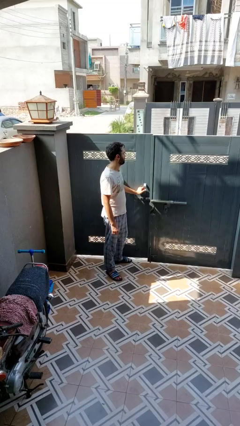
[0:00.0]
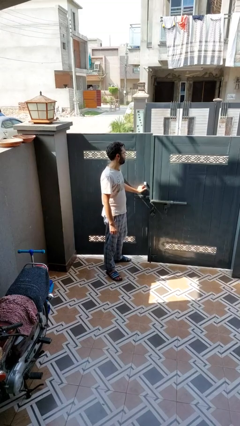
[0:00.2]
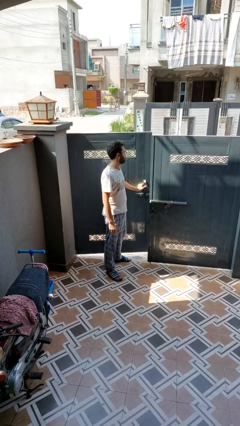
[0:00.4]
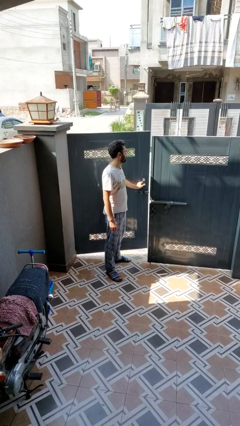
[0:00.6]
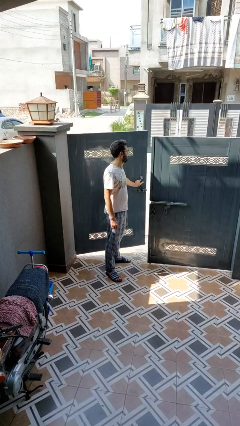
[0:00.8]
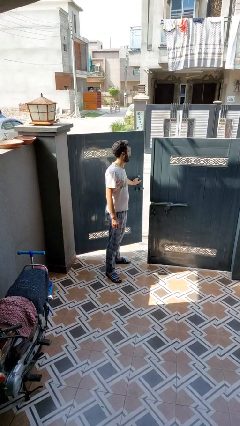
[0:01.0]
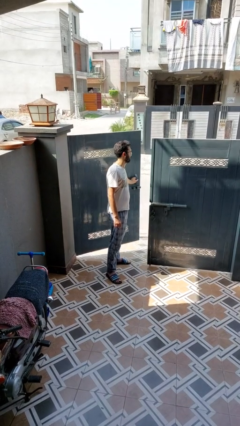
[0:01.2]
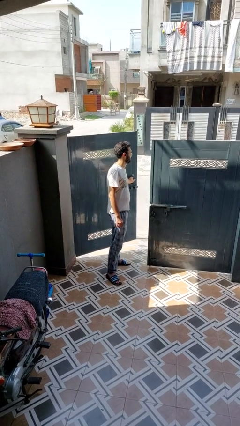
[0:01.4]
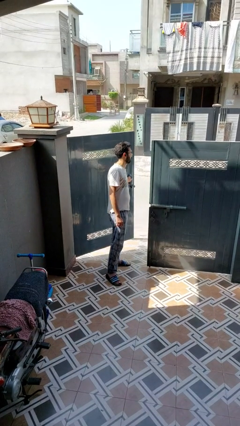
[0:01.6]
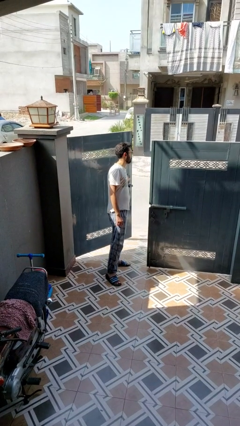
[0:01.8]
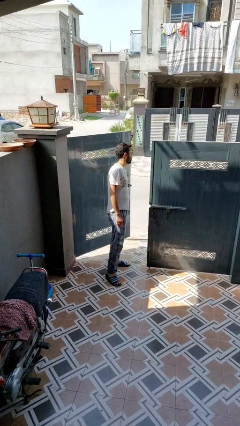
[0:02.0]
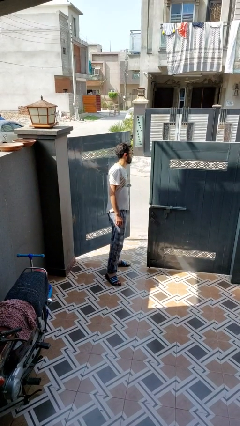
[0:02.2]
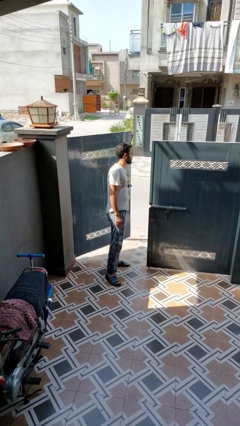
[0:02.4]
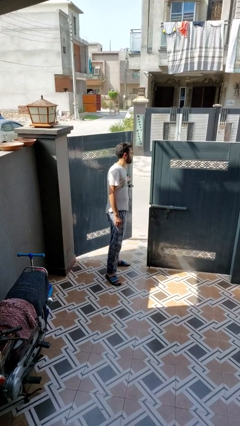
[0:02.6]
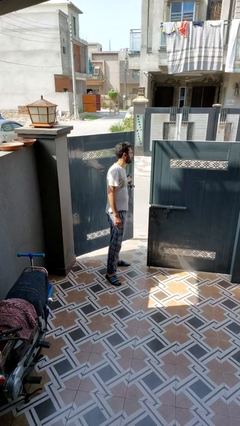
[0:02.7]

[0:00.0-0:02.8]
person opens gate

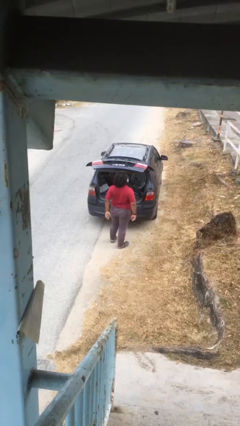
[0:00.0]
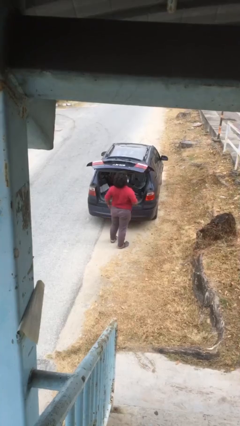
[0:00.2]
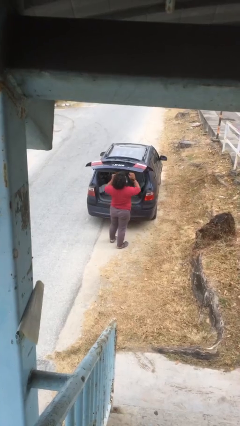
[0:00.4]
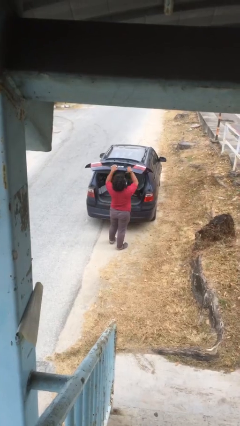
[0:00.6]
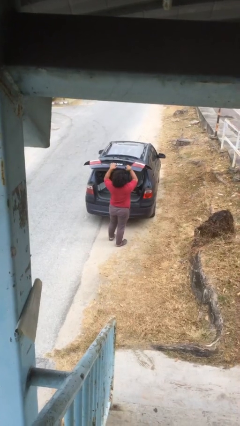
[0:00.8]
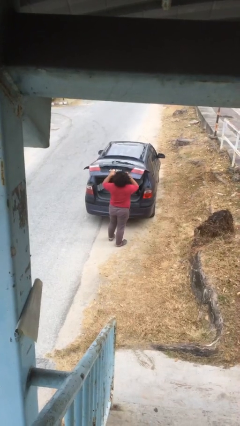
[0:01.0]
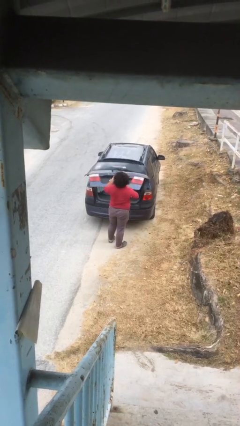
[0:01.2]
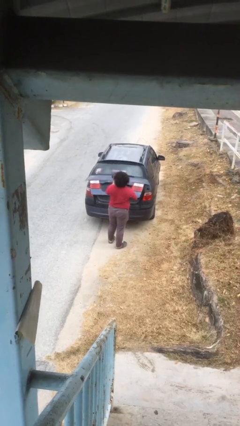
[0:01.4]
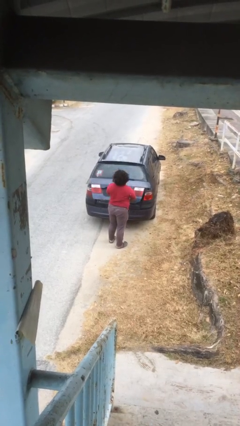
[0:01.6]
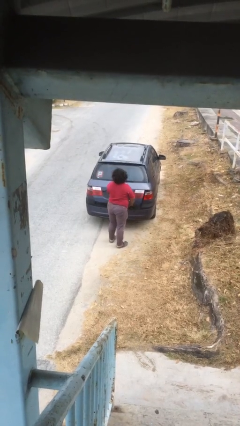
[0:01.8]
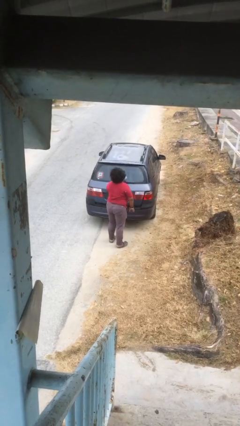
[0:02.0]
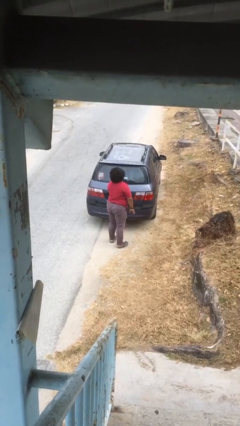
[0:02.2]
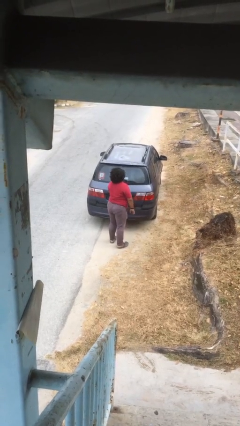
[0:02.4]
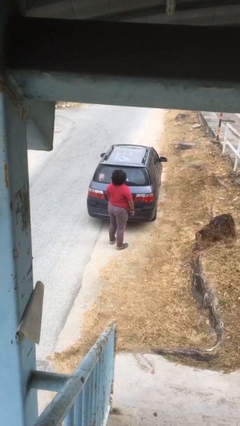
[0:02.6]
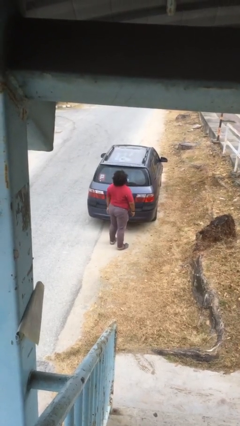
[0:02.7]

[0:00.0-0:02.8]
person closes car trunk

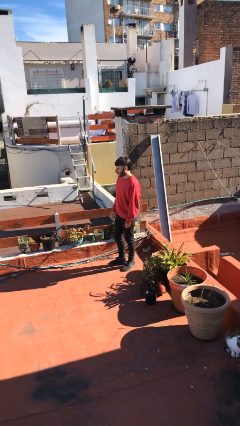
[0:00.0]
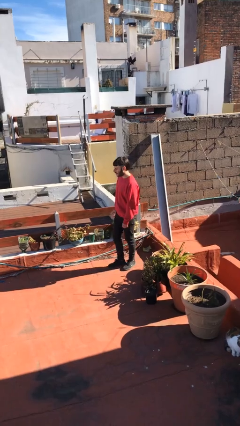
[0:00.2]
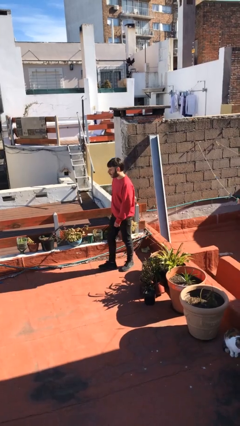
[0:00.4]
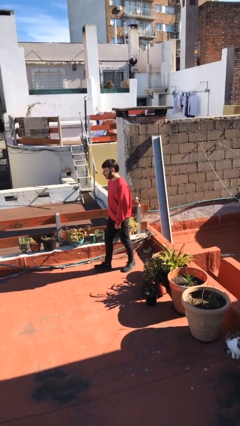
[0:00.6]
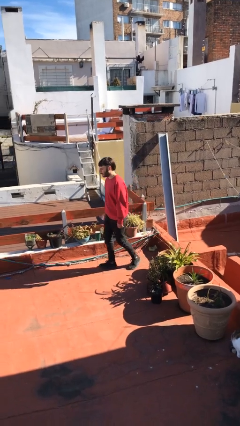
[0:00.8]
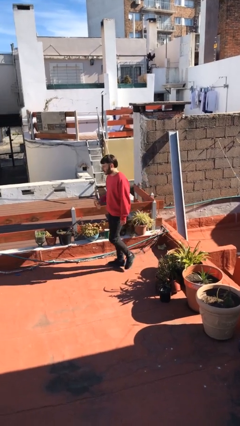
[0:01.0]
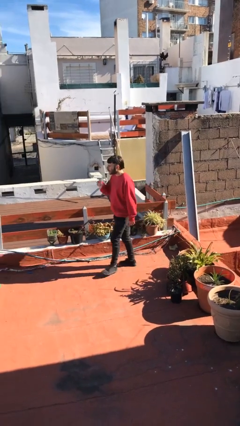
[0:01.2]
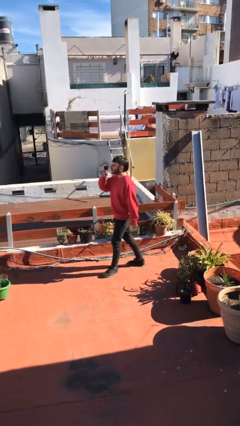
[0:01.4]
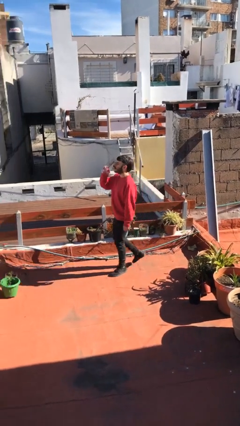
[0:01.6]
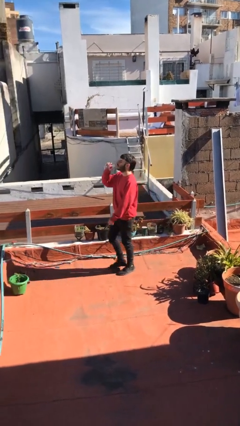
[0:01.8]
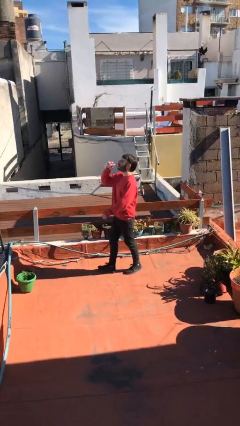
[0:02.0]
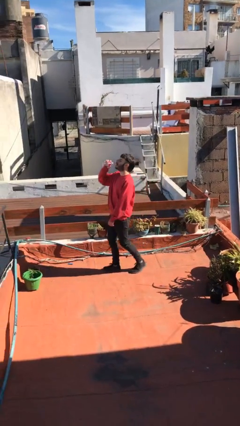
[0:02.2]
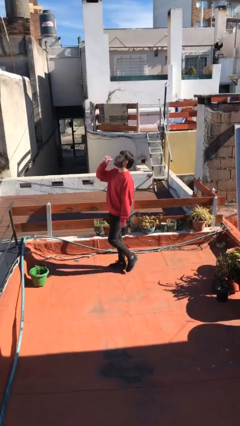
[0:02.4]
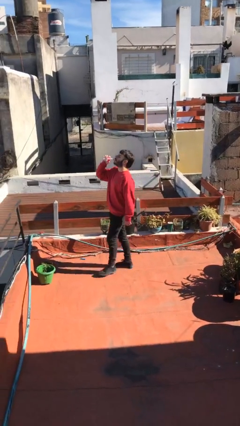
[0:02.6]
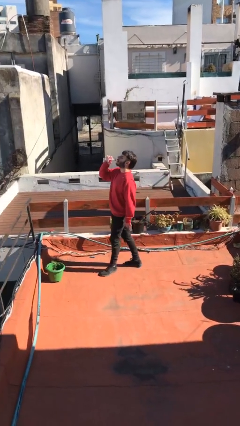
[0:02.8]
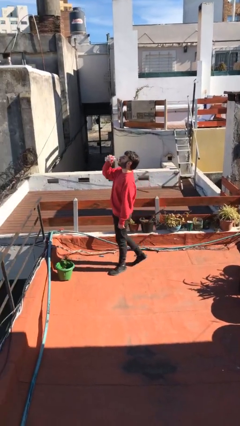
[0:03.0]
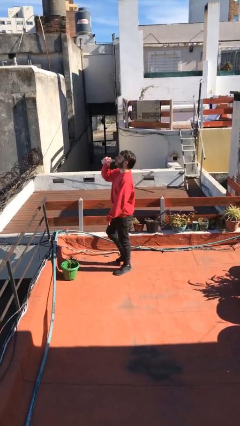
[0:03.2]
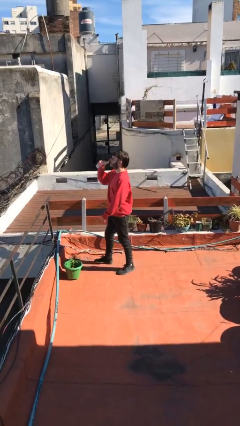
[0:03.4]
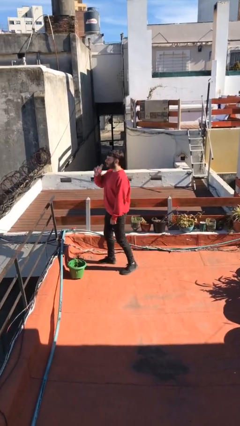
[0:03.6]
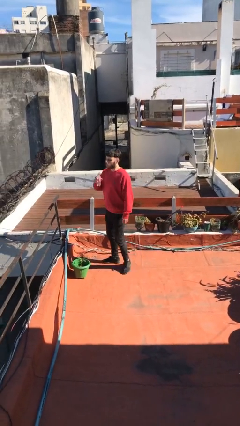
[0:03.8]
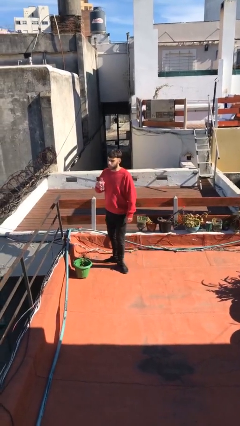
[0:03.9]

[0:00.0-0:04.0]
person drinks from bottle

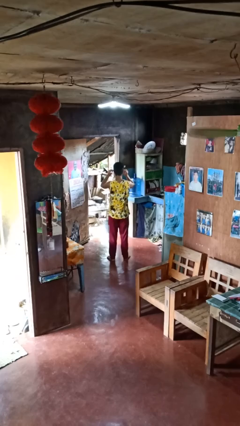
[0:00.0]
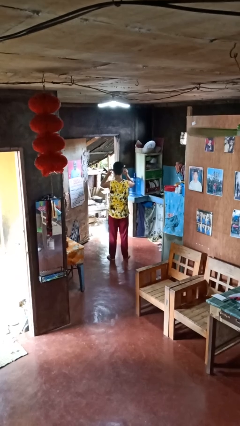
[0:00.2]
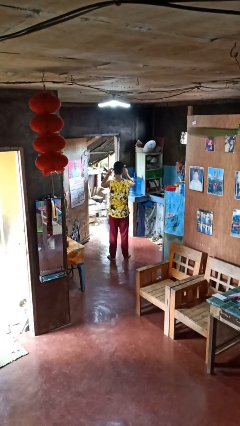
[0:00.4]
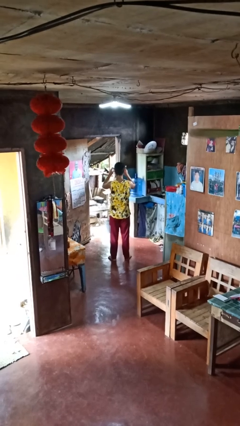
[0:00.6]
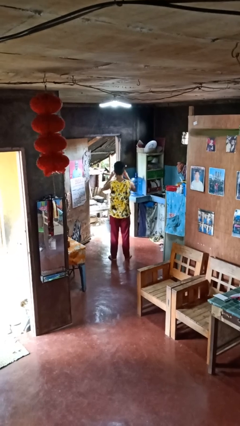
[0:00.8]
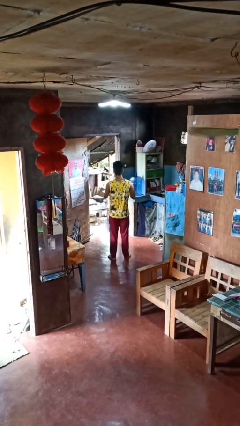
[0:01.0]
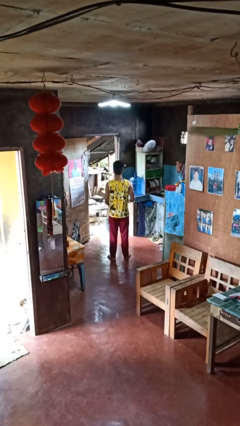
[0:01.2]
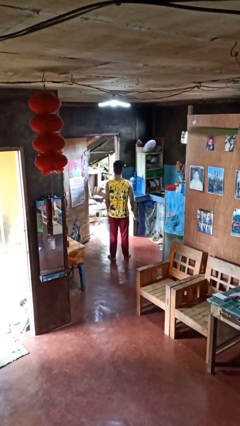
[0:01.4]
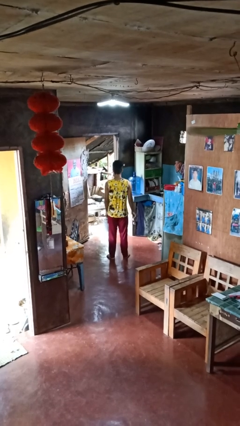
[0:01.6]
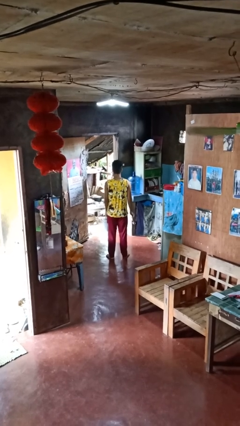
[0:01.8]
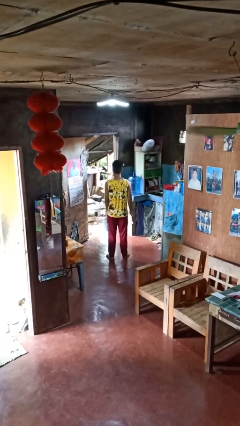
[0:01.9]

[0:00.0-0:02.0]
person takes off glasses

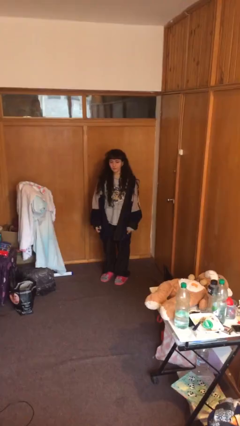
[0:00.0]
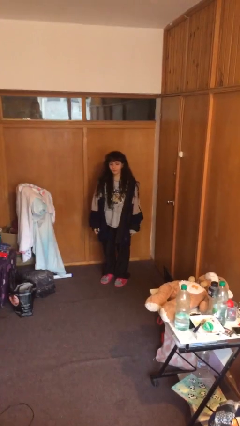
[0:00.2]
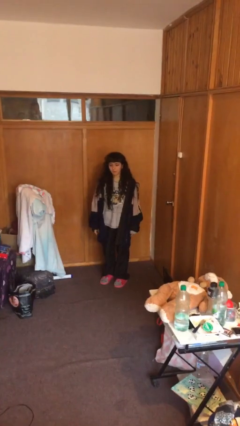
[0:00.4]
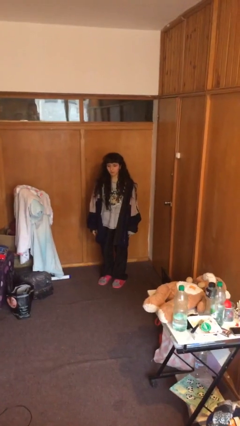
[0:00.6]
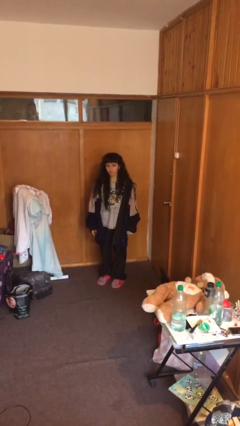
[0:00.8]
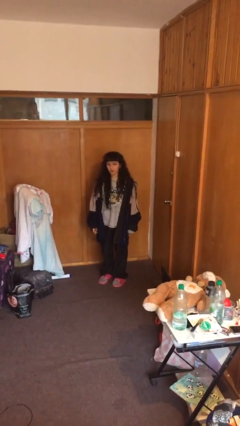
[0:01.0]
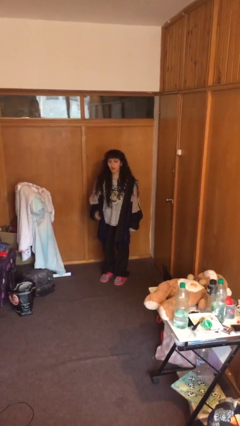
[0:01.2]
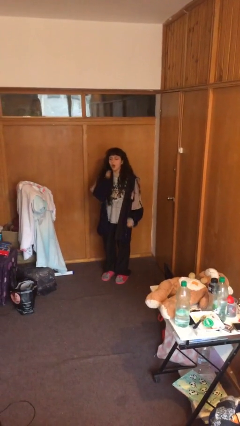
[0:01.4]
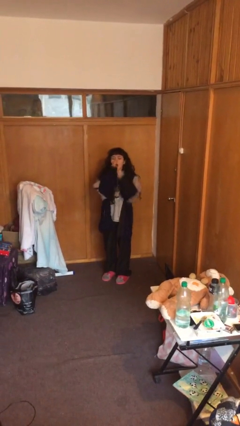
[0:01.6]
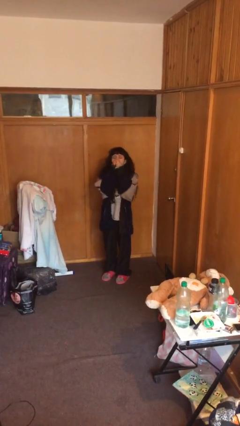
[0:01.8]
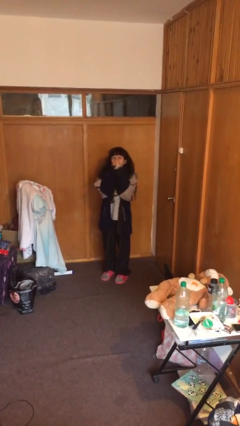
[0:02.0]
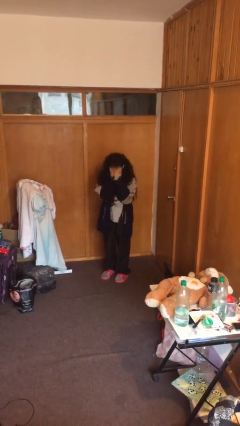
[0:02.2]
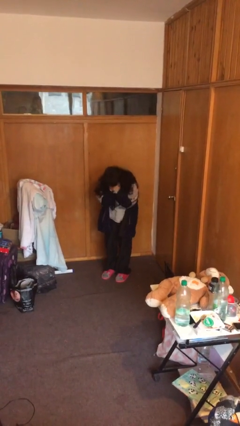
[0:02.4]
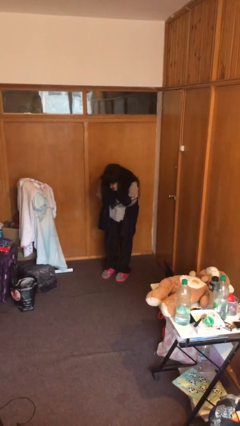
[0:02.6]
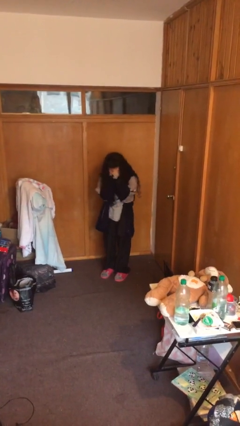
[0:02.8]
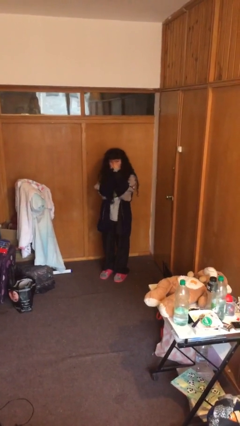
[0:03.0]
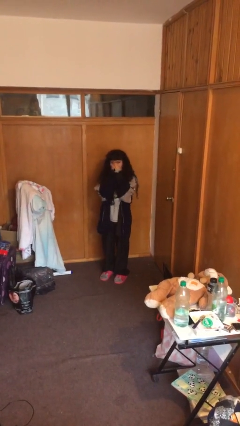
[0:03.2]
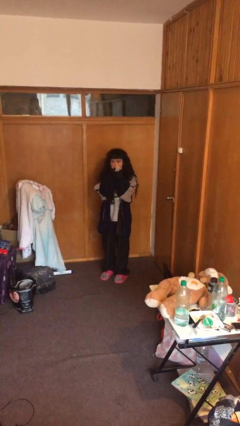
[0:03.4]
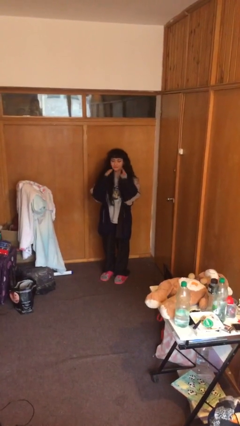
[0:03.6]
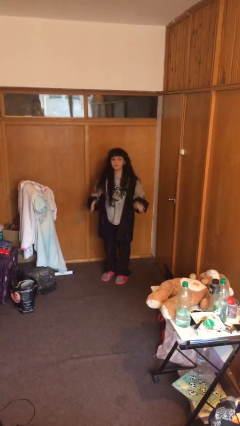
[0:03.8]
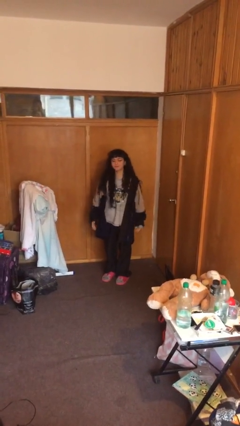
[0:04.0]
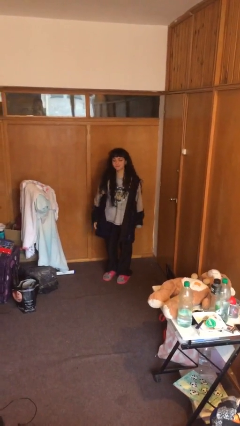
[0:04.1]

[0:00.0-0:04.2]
person sneezes into hand

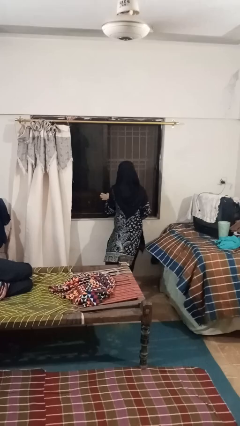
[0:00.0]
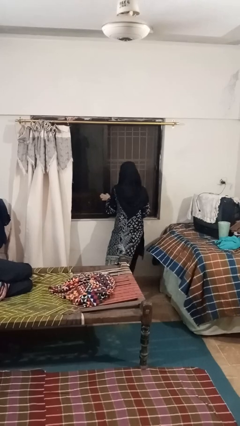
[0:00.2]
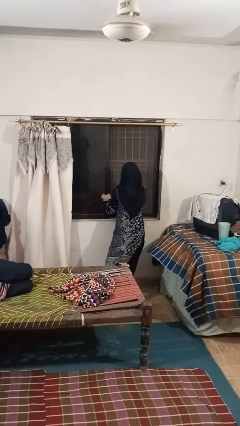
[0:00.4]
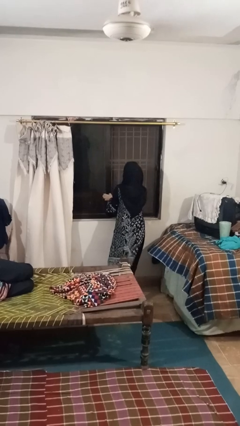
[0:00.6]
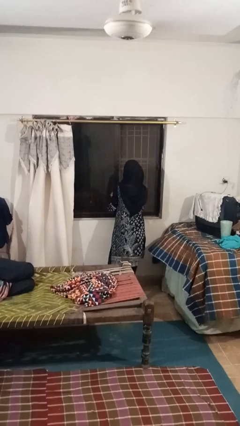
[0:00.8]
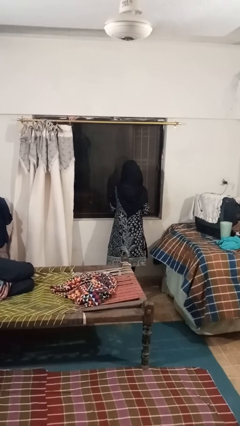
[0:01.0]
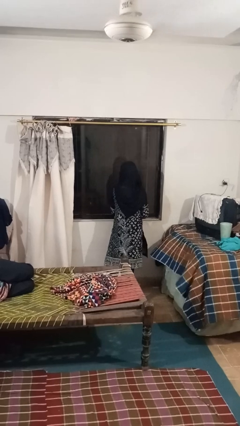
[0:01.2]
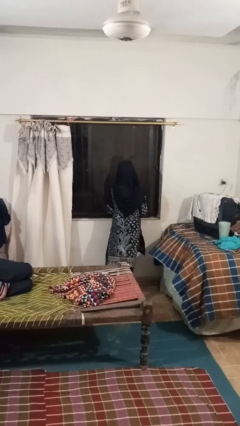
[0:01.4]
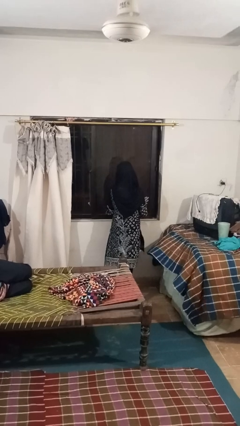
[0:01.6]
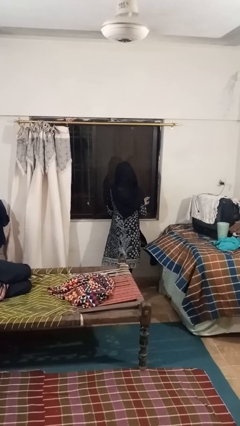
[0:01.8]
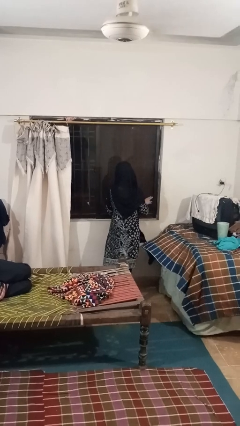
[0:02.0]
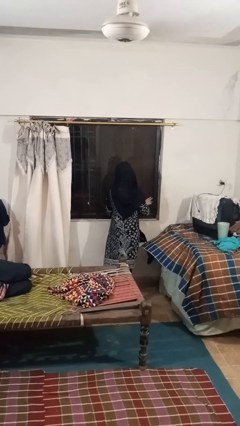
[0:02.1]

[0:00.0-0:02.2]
person closes sliding door
